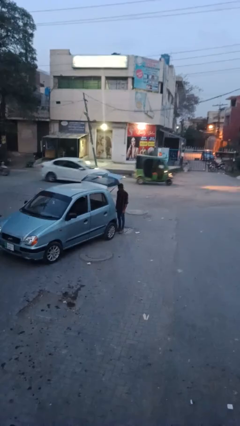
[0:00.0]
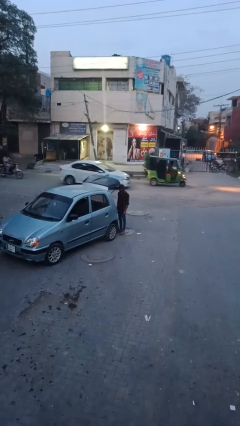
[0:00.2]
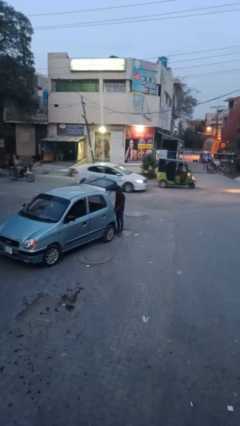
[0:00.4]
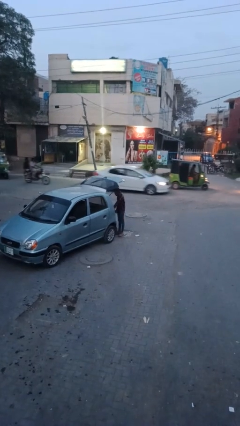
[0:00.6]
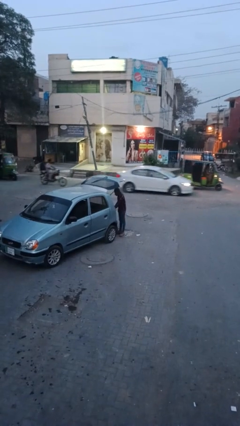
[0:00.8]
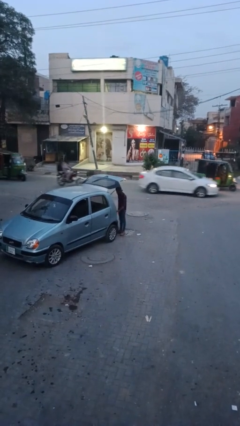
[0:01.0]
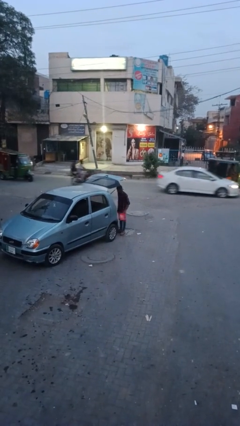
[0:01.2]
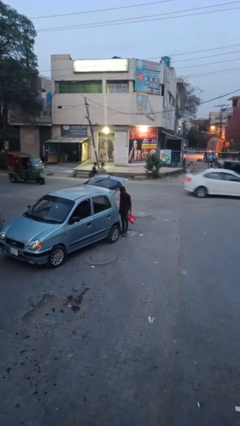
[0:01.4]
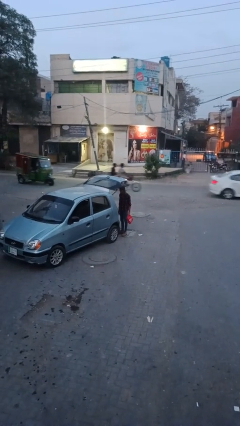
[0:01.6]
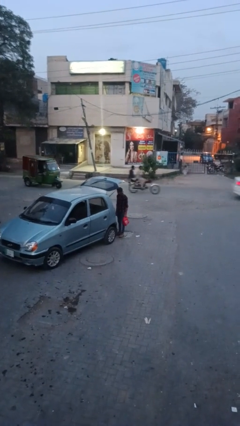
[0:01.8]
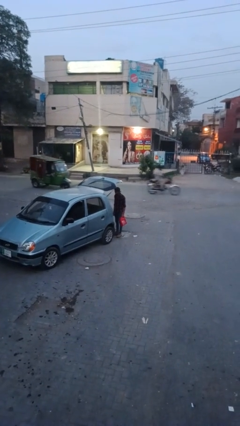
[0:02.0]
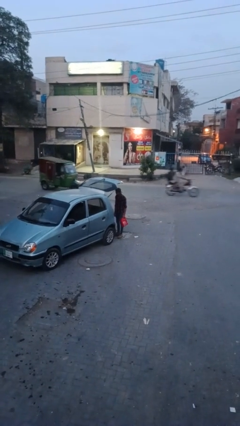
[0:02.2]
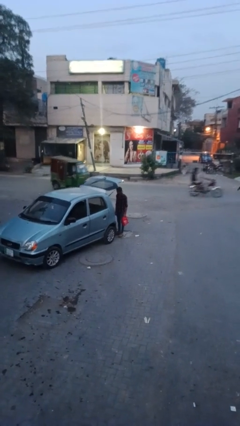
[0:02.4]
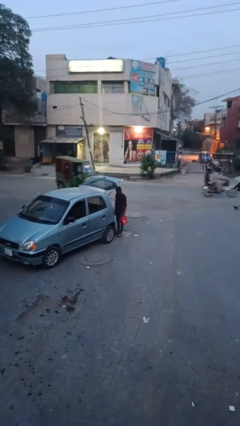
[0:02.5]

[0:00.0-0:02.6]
person unloads car

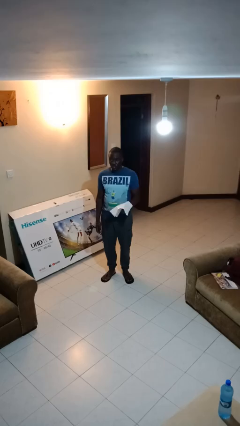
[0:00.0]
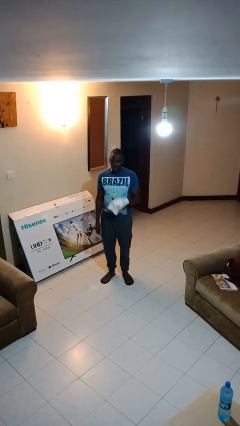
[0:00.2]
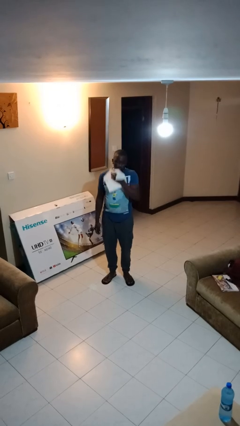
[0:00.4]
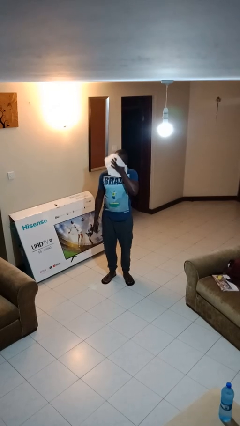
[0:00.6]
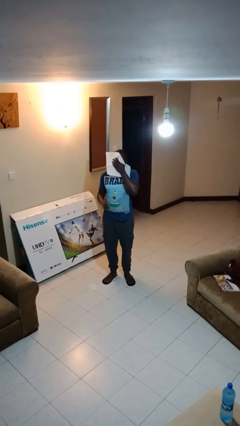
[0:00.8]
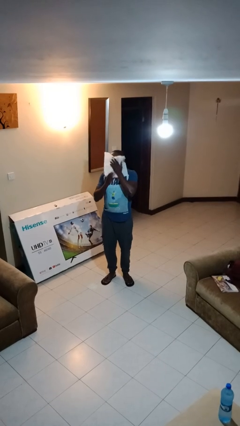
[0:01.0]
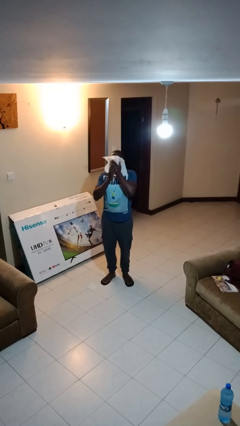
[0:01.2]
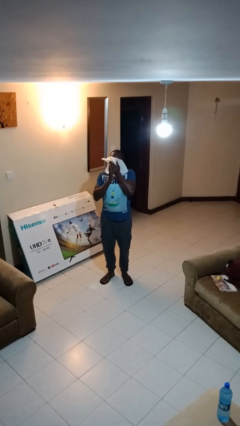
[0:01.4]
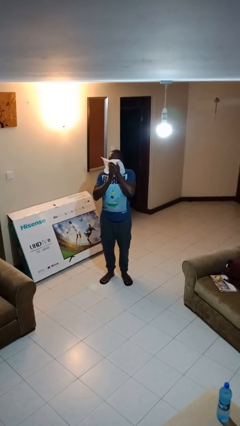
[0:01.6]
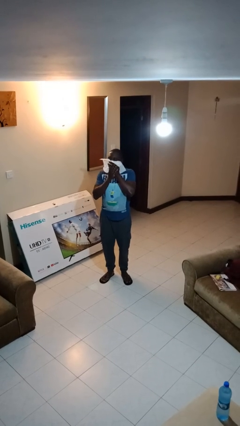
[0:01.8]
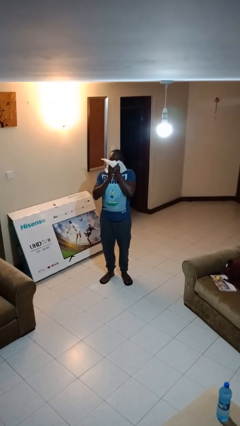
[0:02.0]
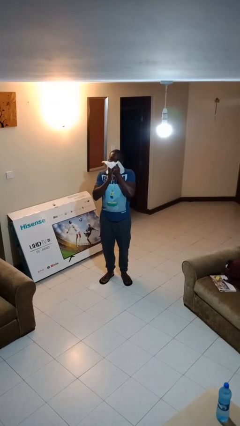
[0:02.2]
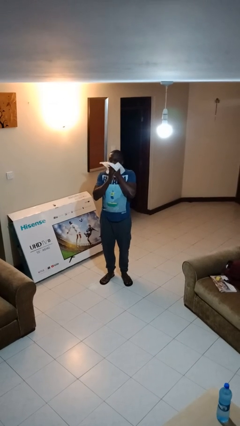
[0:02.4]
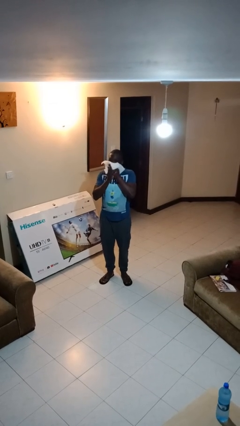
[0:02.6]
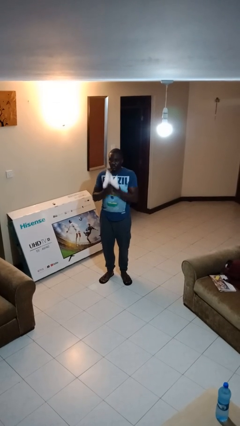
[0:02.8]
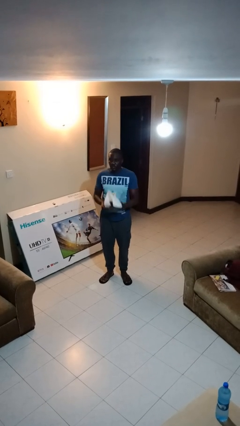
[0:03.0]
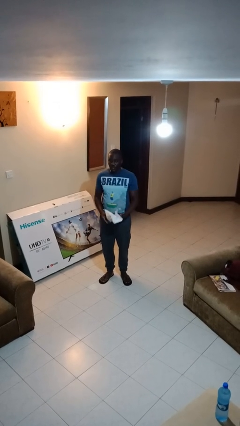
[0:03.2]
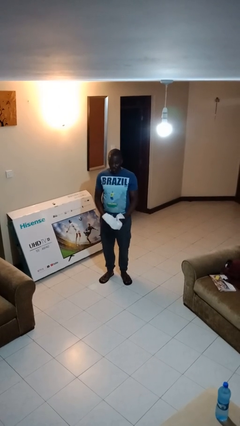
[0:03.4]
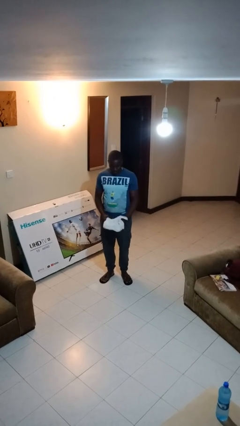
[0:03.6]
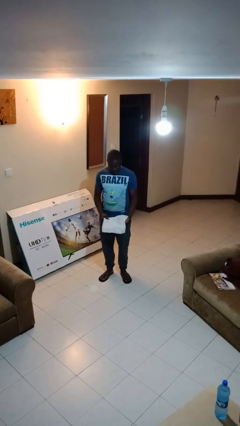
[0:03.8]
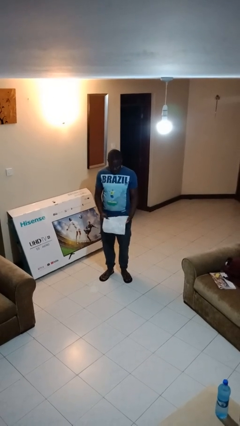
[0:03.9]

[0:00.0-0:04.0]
person wipes mouth with napkin

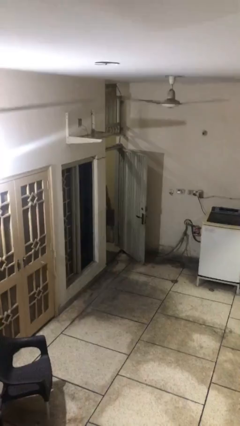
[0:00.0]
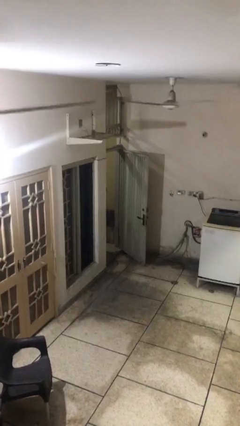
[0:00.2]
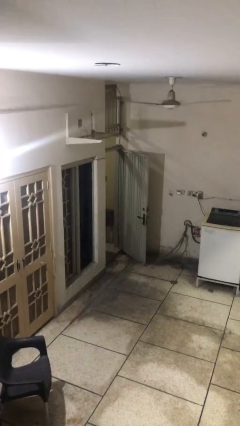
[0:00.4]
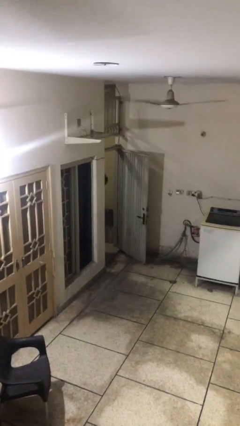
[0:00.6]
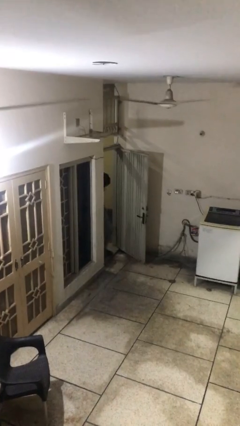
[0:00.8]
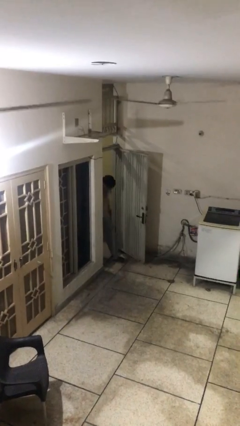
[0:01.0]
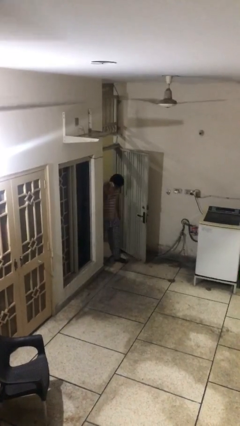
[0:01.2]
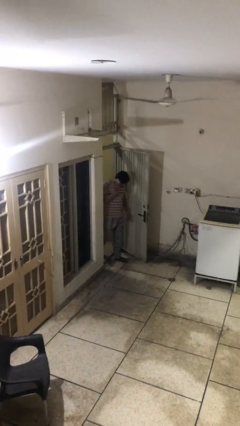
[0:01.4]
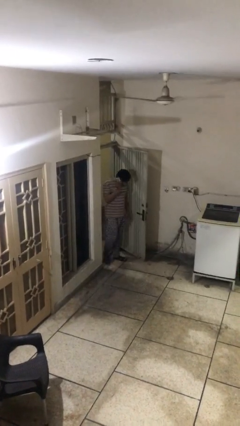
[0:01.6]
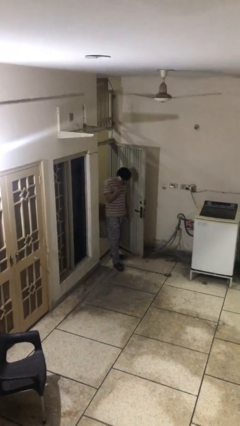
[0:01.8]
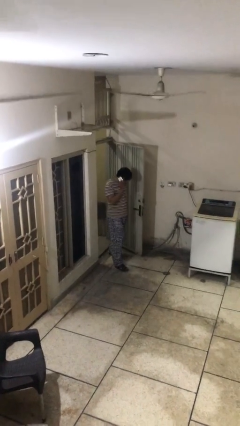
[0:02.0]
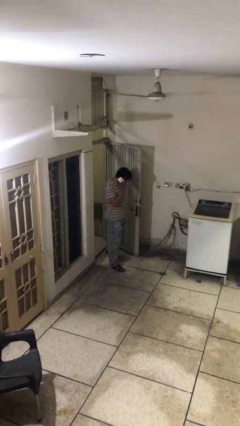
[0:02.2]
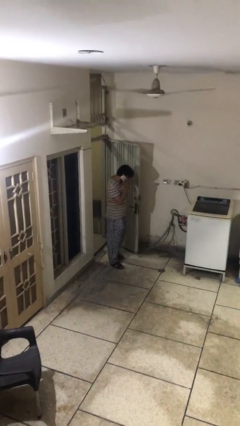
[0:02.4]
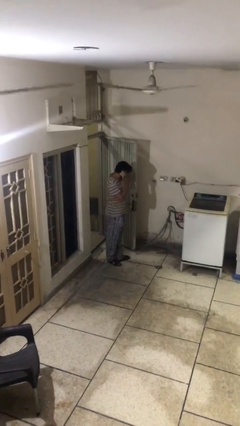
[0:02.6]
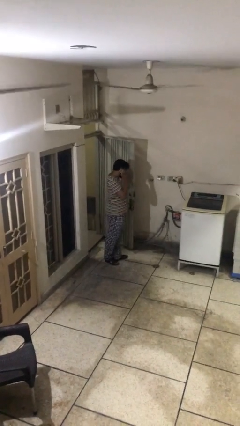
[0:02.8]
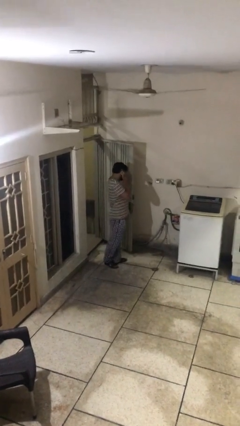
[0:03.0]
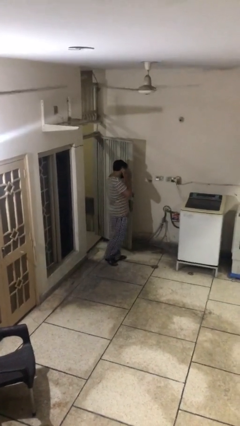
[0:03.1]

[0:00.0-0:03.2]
person enters scene through structure

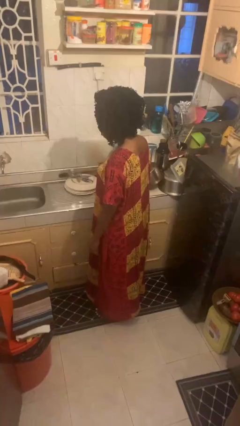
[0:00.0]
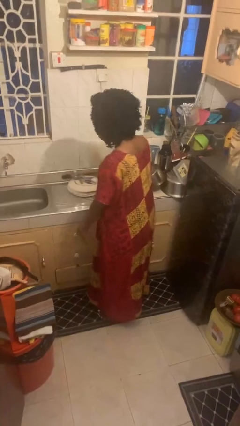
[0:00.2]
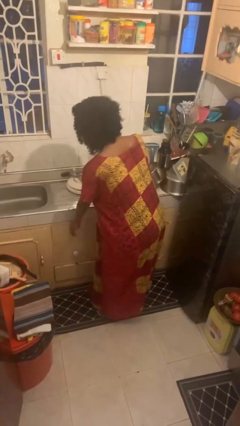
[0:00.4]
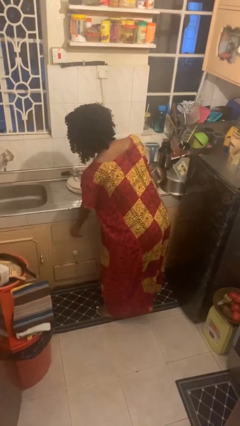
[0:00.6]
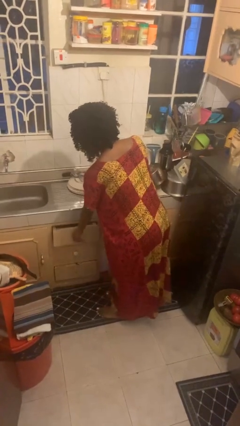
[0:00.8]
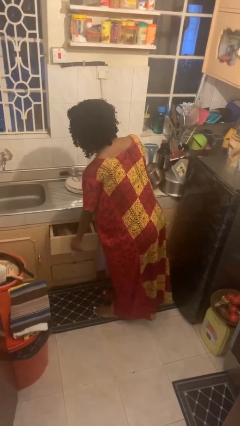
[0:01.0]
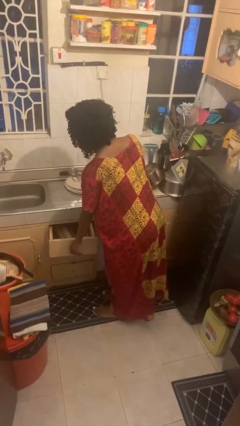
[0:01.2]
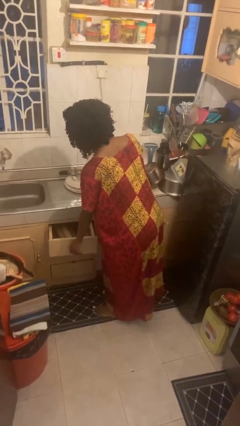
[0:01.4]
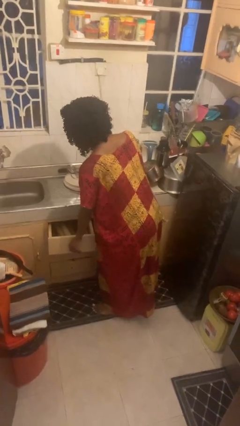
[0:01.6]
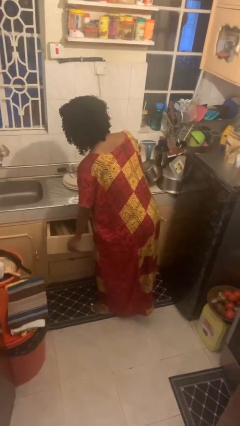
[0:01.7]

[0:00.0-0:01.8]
person opens kitchen drawer

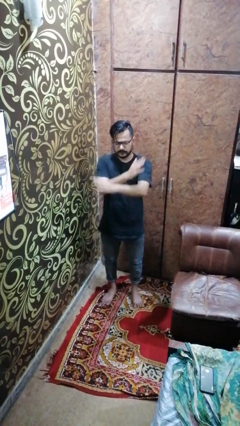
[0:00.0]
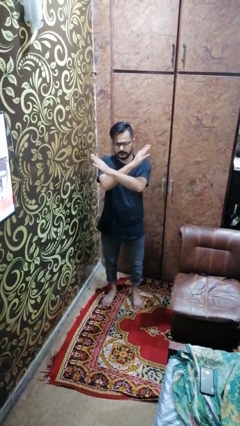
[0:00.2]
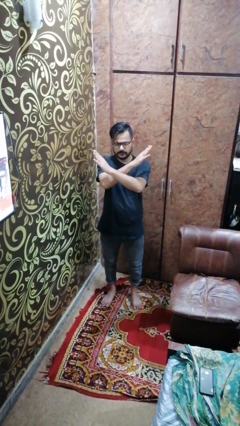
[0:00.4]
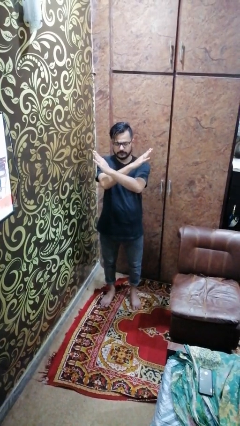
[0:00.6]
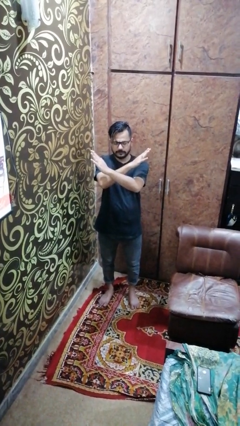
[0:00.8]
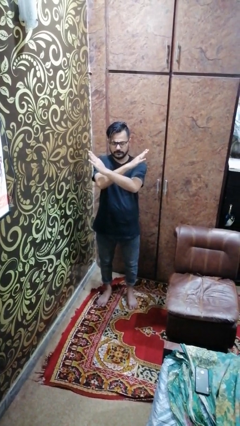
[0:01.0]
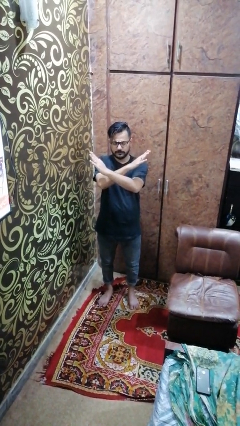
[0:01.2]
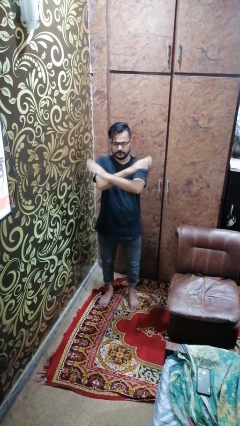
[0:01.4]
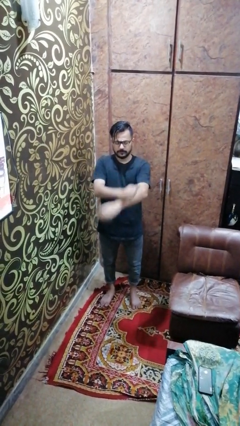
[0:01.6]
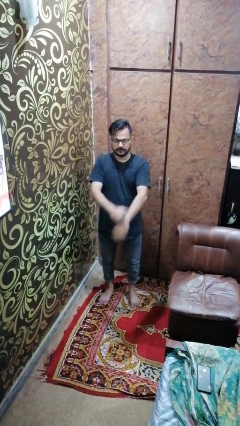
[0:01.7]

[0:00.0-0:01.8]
person crosses arms

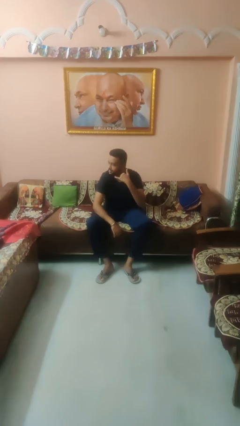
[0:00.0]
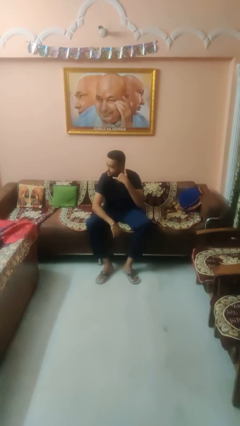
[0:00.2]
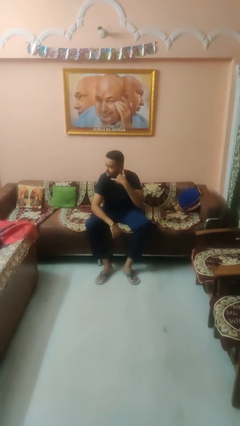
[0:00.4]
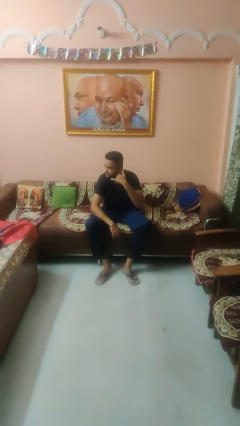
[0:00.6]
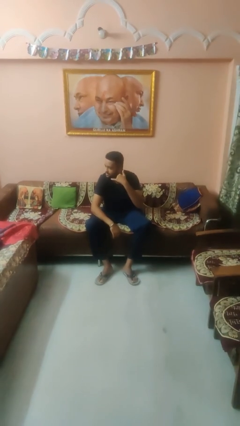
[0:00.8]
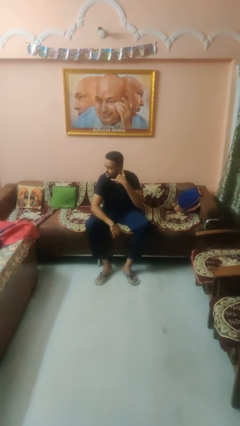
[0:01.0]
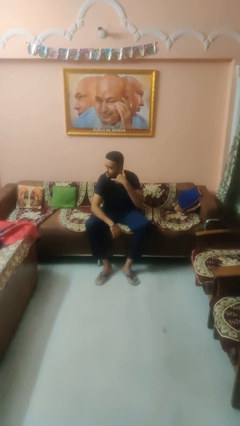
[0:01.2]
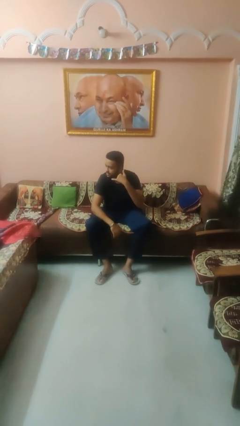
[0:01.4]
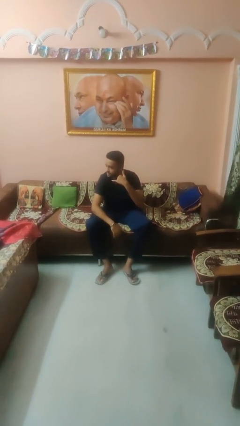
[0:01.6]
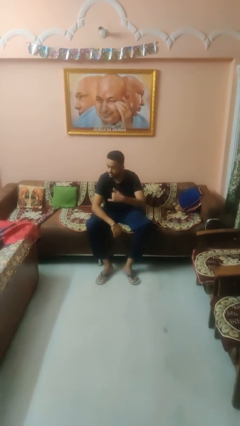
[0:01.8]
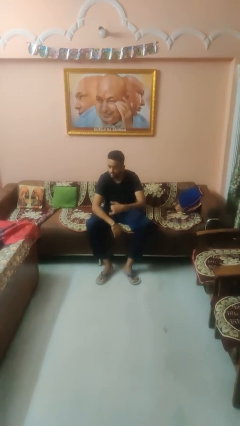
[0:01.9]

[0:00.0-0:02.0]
person gestures call me

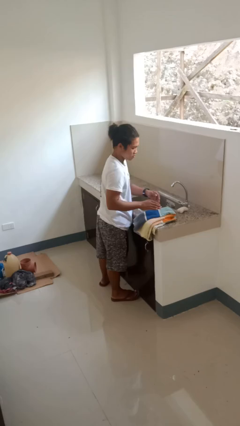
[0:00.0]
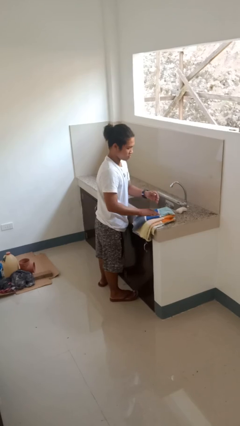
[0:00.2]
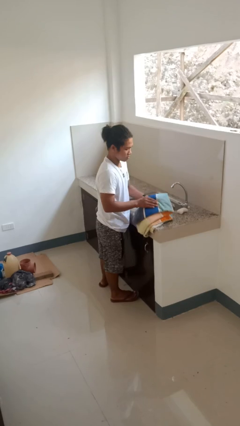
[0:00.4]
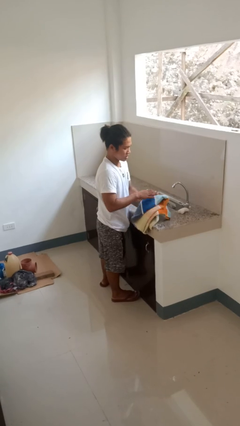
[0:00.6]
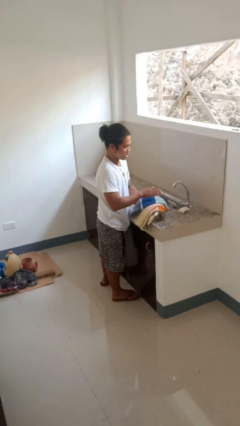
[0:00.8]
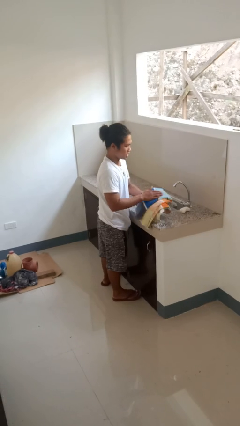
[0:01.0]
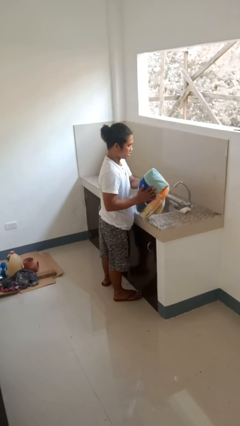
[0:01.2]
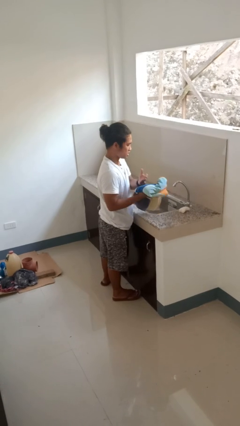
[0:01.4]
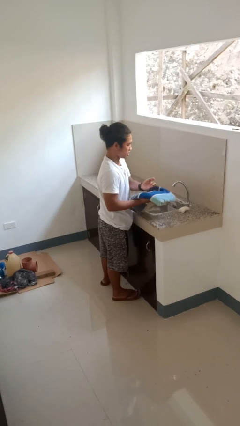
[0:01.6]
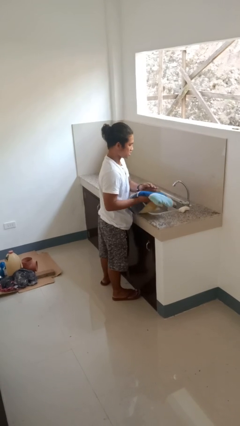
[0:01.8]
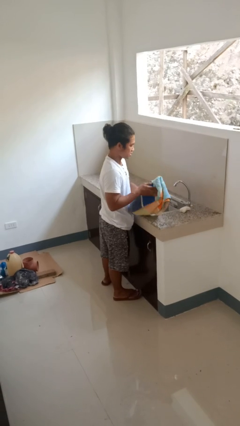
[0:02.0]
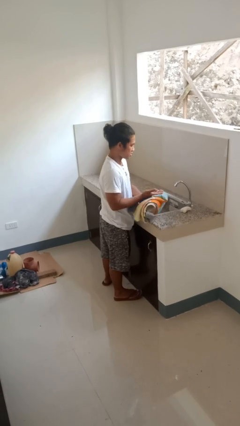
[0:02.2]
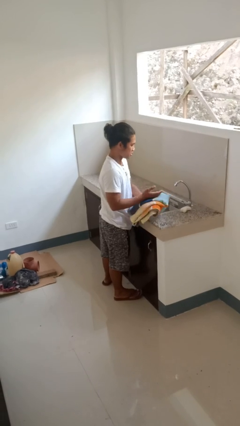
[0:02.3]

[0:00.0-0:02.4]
person dries hands with towel
